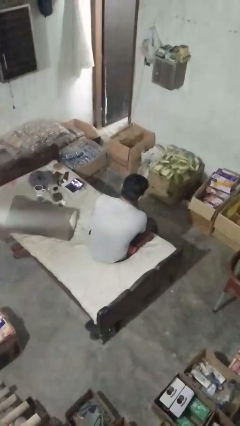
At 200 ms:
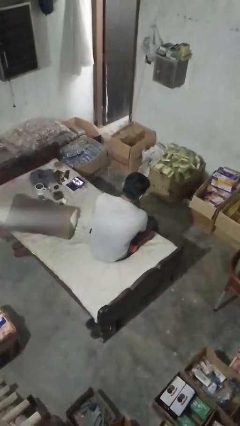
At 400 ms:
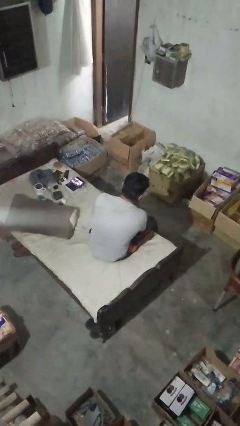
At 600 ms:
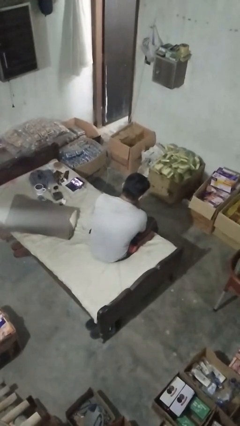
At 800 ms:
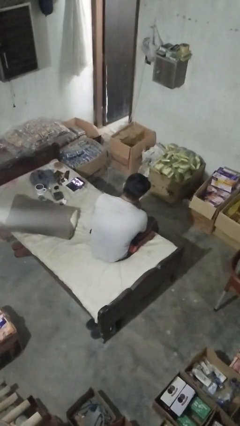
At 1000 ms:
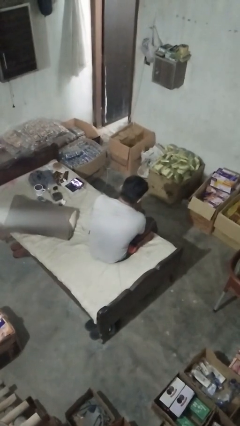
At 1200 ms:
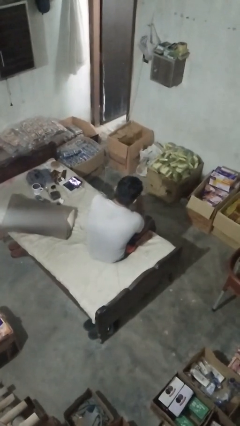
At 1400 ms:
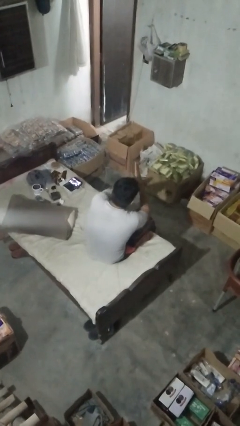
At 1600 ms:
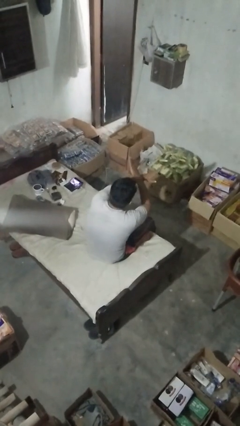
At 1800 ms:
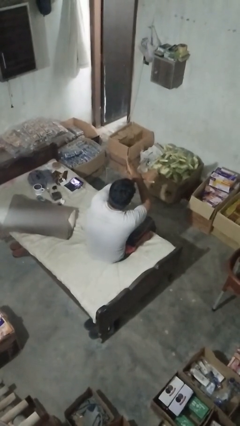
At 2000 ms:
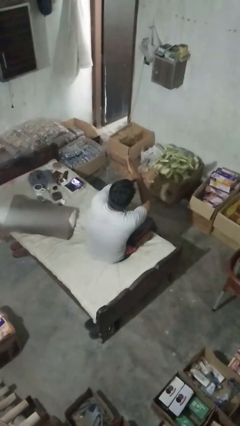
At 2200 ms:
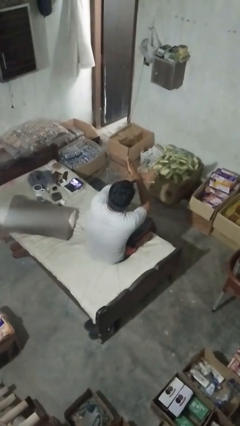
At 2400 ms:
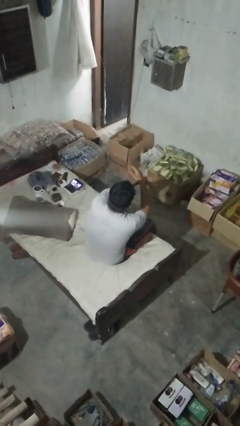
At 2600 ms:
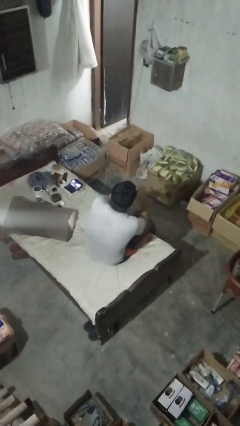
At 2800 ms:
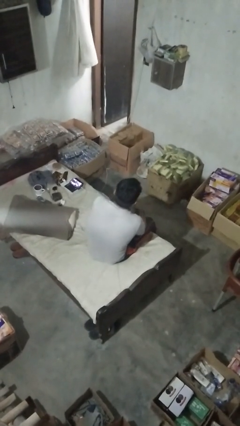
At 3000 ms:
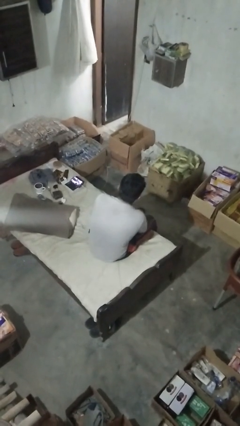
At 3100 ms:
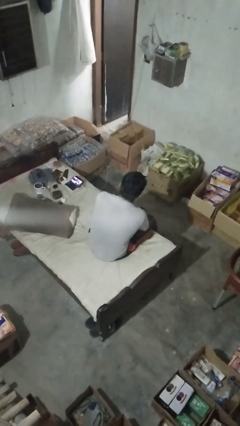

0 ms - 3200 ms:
person gestures arms x

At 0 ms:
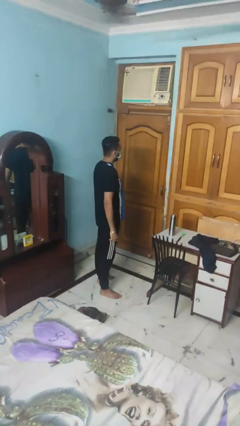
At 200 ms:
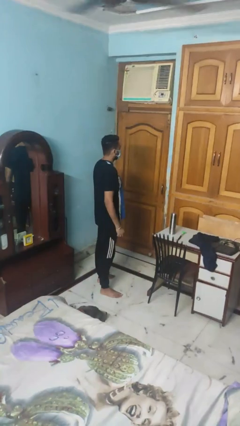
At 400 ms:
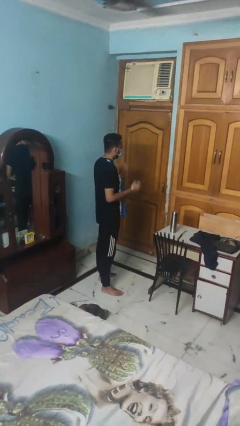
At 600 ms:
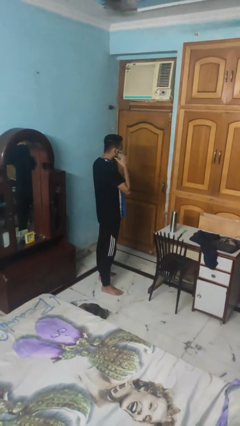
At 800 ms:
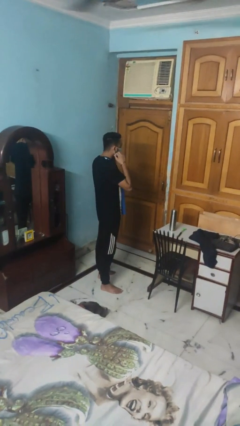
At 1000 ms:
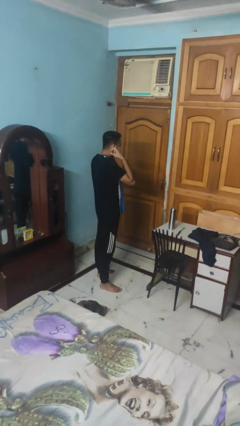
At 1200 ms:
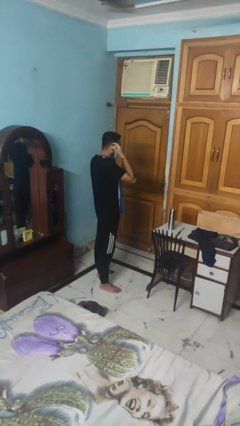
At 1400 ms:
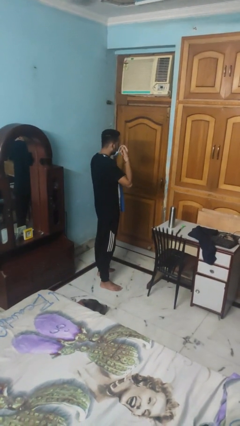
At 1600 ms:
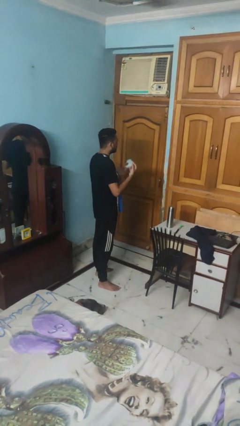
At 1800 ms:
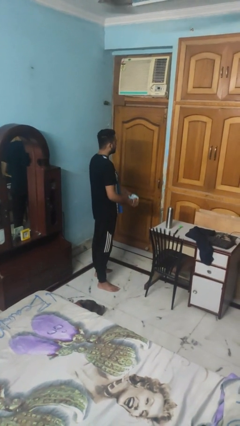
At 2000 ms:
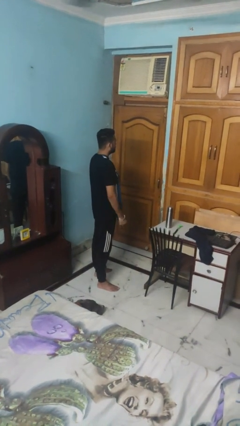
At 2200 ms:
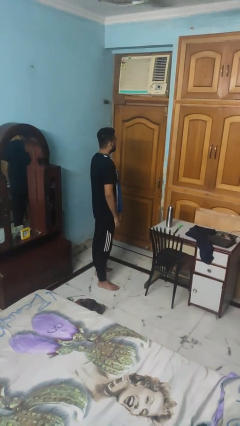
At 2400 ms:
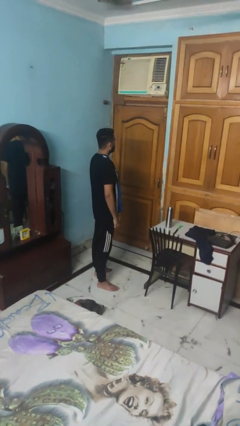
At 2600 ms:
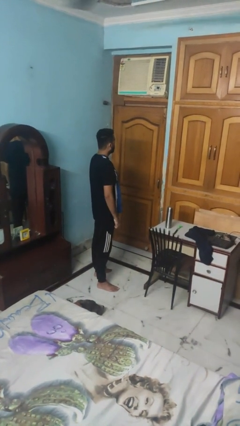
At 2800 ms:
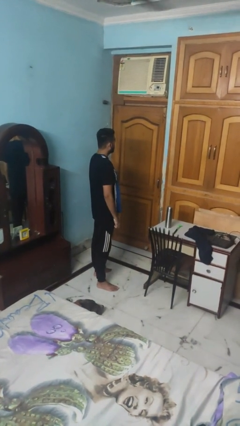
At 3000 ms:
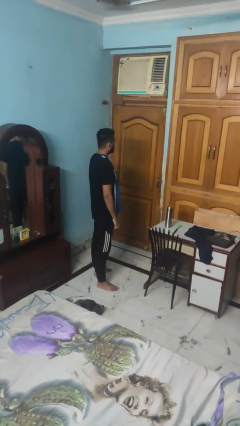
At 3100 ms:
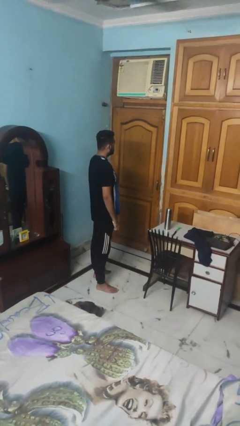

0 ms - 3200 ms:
person takes off facemask

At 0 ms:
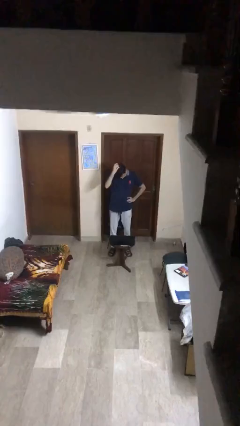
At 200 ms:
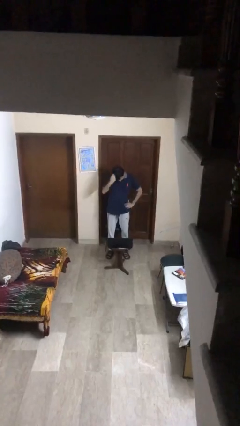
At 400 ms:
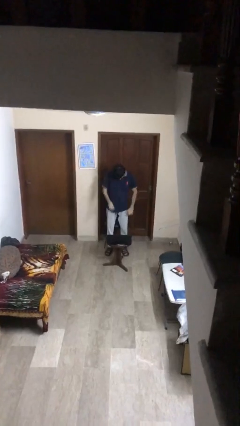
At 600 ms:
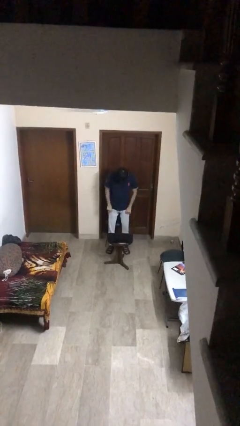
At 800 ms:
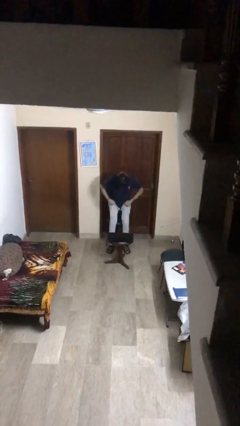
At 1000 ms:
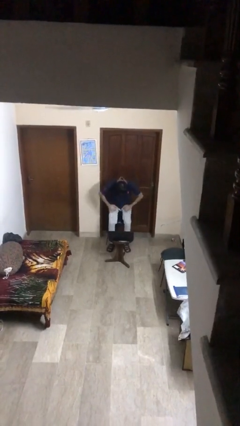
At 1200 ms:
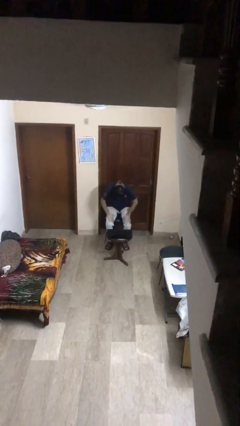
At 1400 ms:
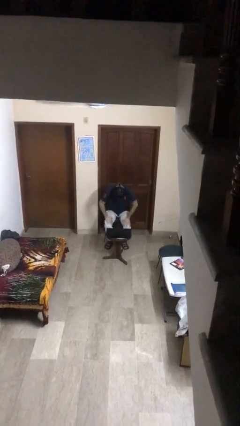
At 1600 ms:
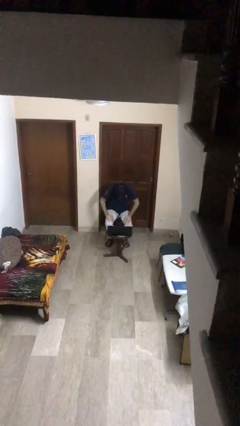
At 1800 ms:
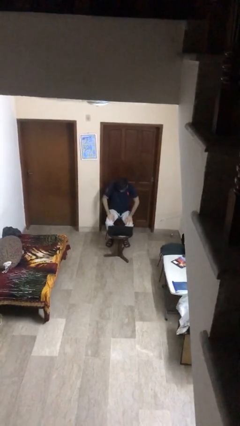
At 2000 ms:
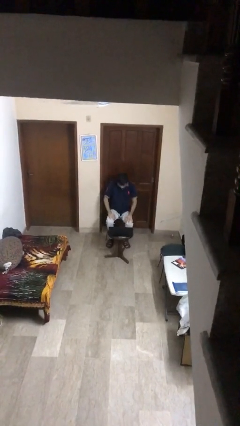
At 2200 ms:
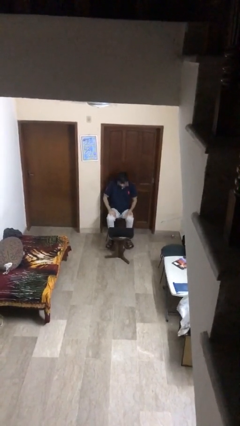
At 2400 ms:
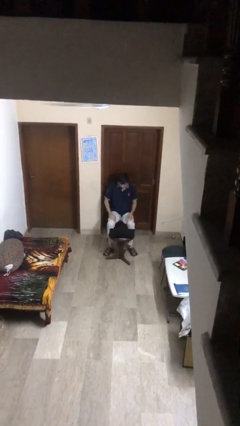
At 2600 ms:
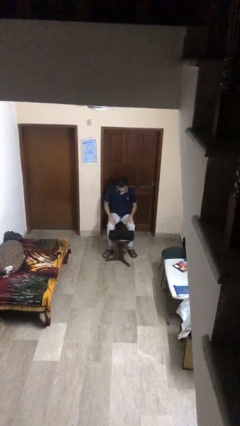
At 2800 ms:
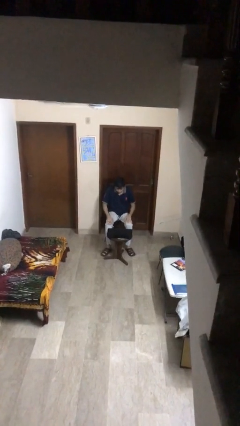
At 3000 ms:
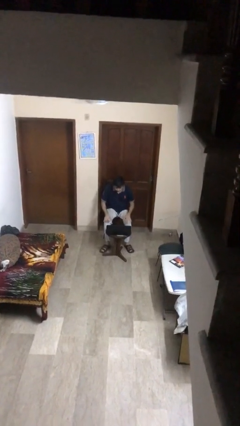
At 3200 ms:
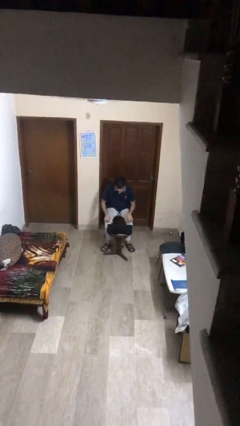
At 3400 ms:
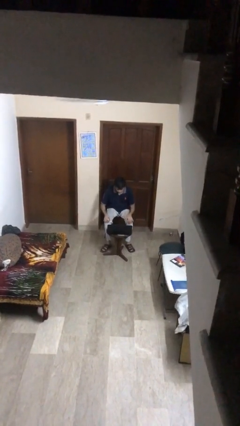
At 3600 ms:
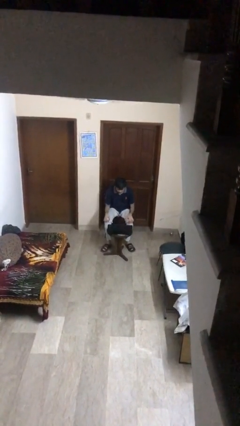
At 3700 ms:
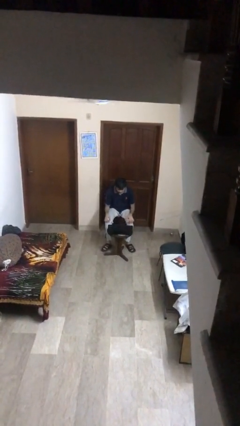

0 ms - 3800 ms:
person sits down

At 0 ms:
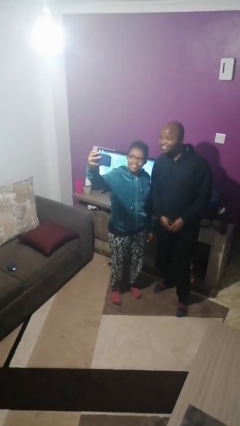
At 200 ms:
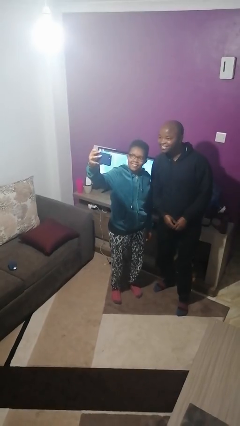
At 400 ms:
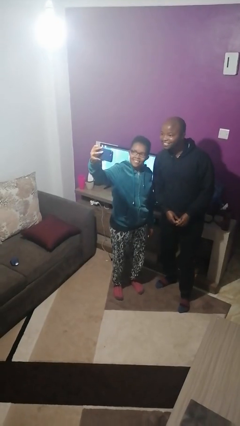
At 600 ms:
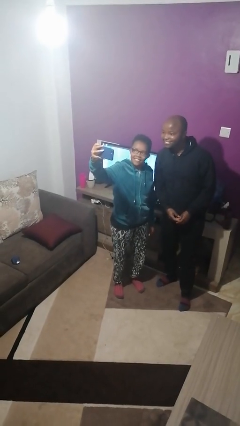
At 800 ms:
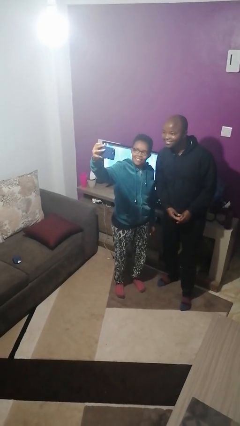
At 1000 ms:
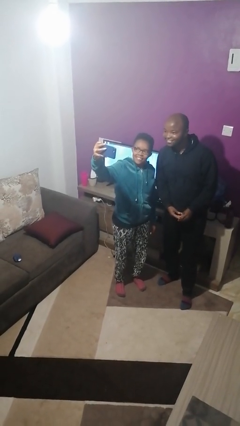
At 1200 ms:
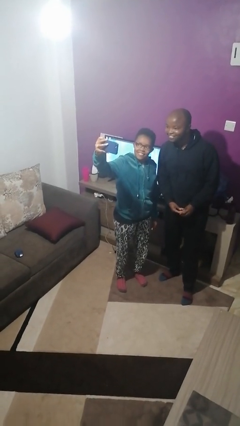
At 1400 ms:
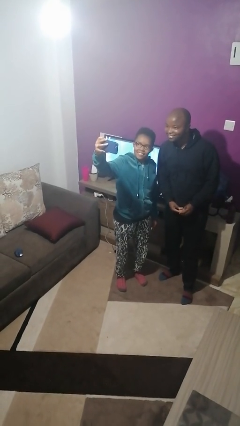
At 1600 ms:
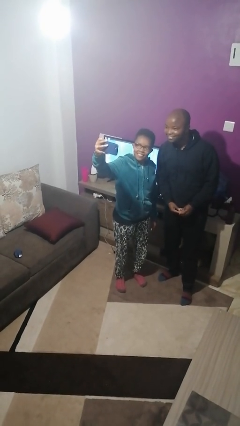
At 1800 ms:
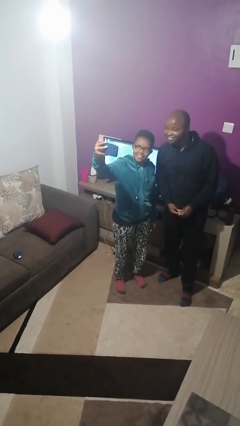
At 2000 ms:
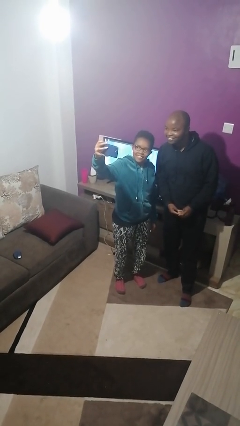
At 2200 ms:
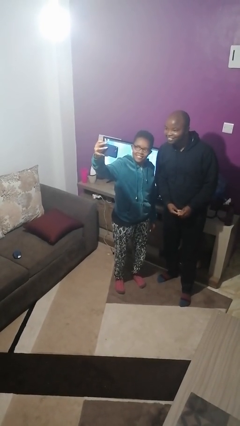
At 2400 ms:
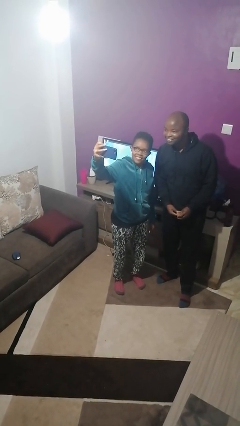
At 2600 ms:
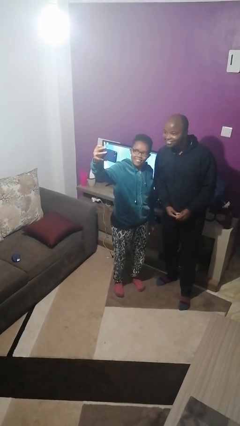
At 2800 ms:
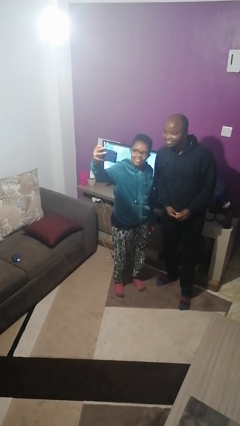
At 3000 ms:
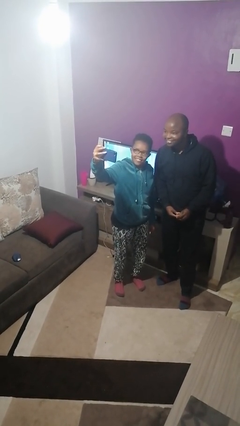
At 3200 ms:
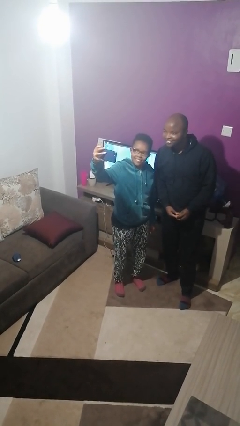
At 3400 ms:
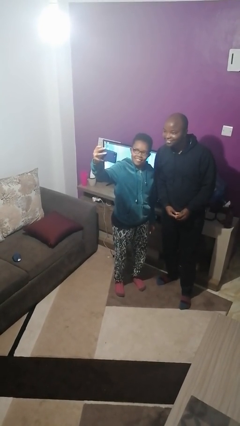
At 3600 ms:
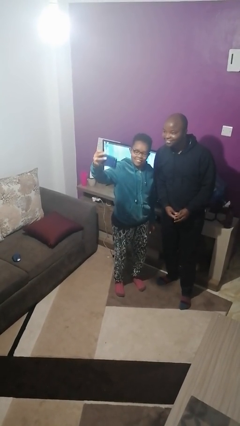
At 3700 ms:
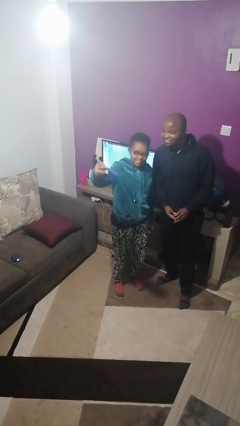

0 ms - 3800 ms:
person takes selfie with person

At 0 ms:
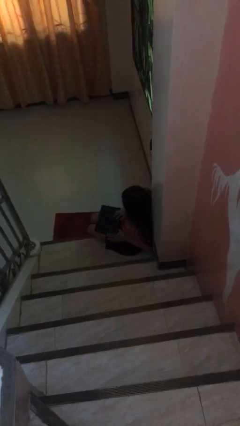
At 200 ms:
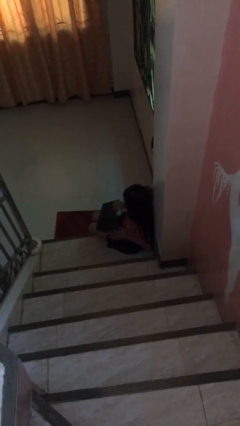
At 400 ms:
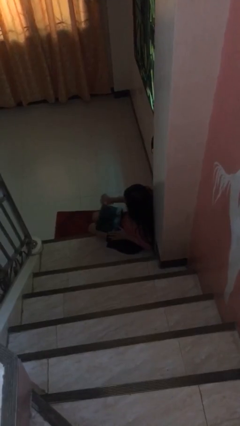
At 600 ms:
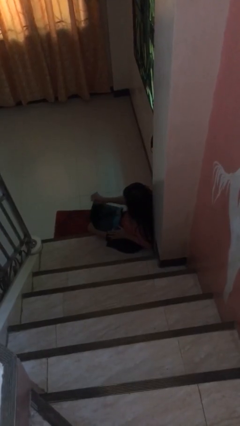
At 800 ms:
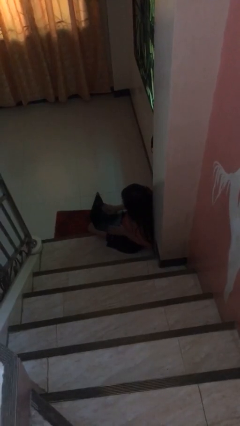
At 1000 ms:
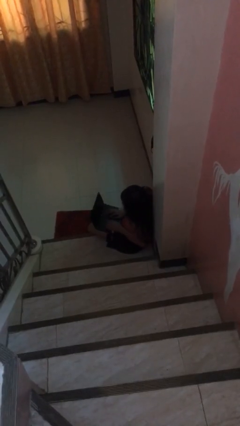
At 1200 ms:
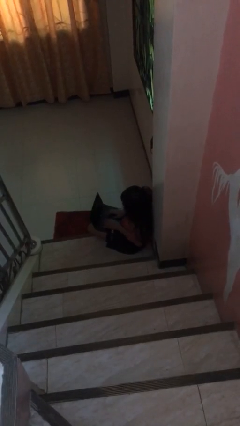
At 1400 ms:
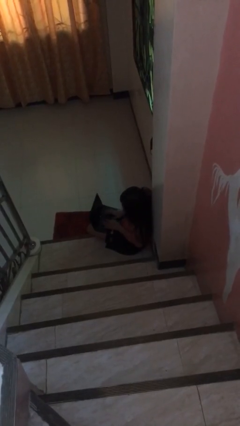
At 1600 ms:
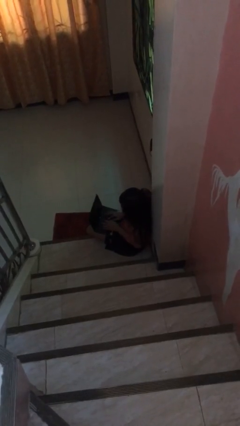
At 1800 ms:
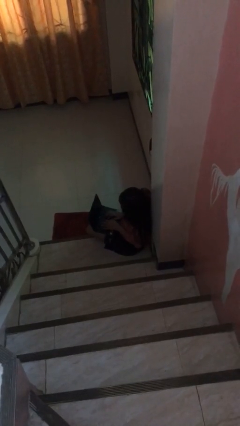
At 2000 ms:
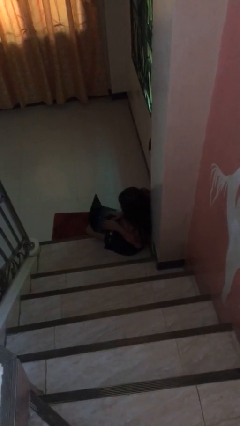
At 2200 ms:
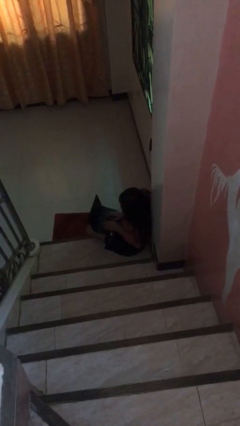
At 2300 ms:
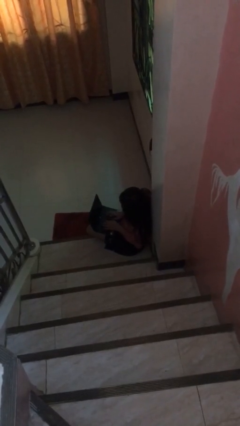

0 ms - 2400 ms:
person interacts with laptop

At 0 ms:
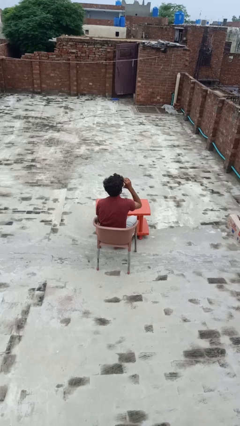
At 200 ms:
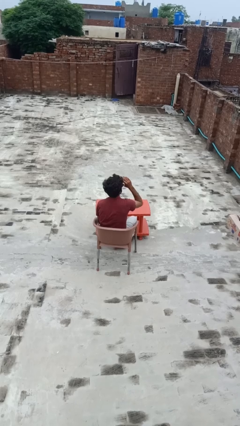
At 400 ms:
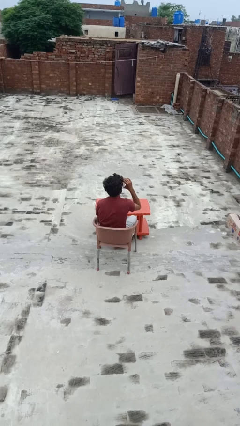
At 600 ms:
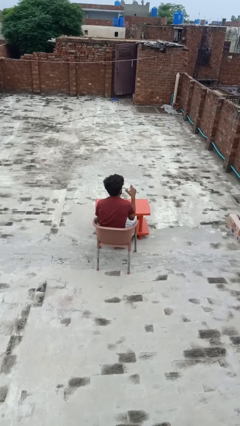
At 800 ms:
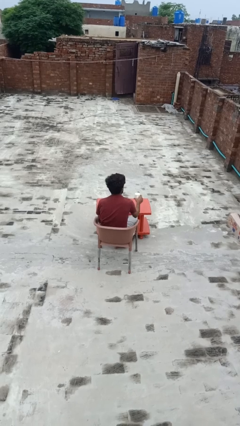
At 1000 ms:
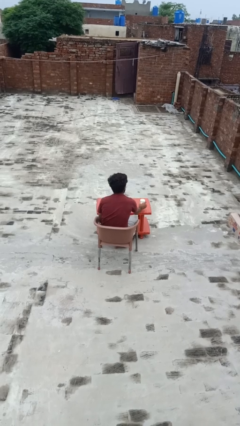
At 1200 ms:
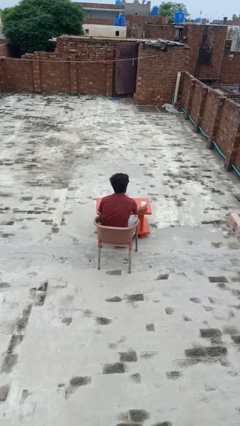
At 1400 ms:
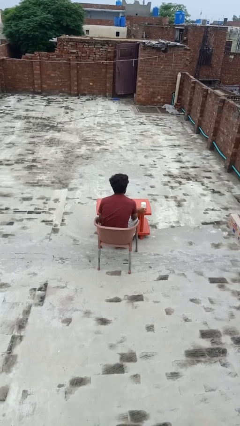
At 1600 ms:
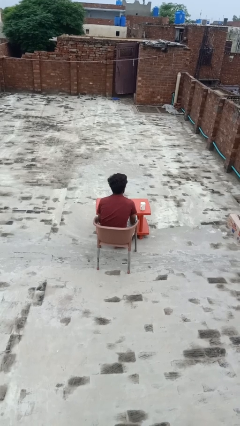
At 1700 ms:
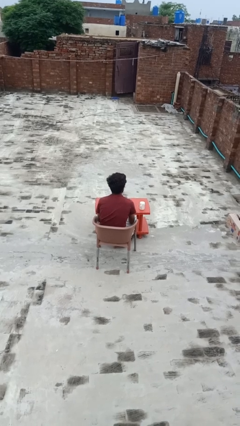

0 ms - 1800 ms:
person drinks from mug
